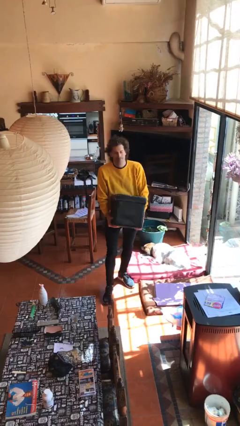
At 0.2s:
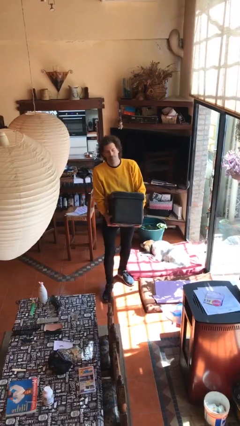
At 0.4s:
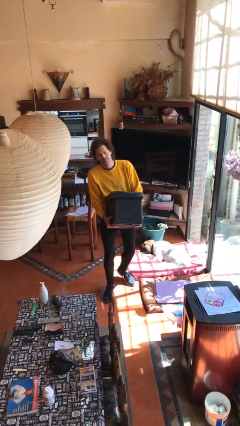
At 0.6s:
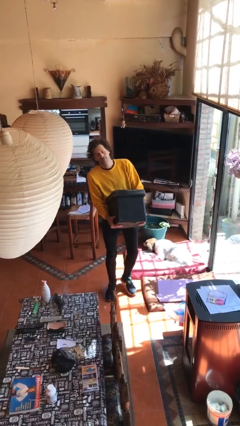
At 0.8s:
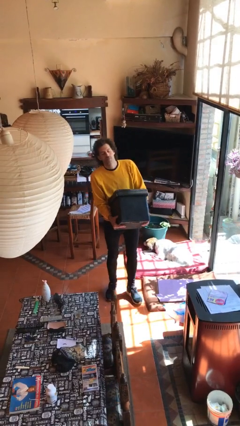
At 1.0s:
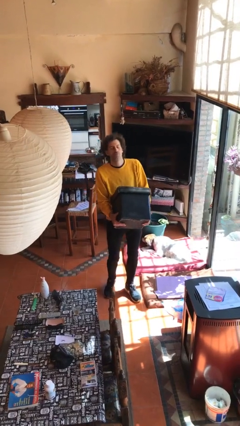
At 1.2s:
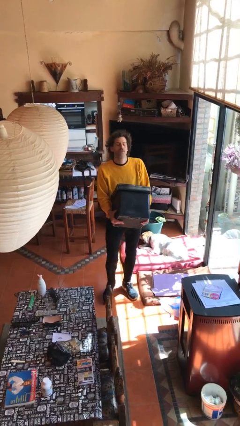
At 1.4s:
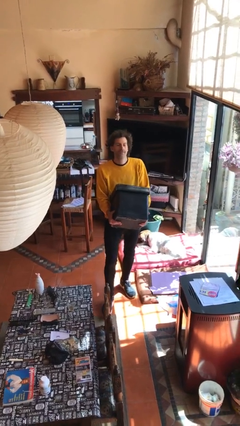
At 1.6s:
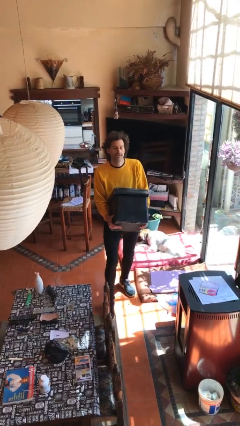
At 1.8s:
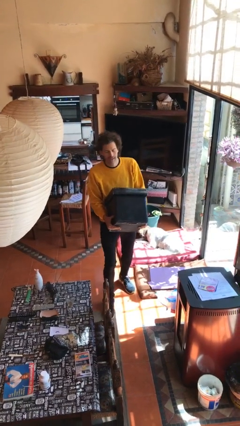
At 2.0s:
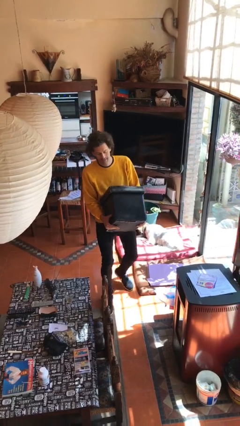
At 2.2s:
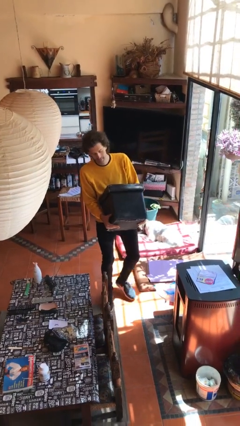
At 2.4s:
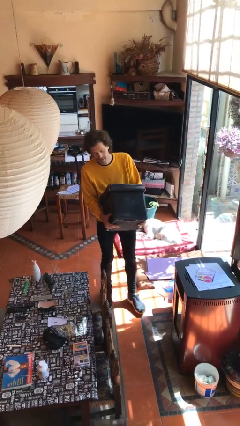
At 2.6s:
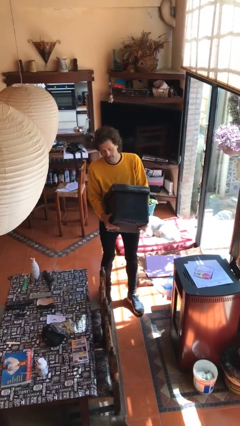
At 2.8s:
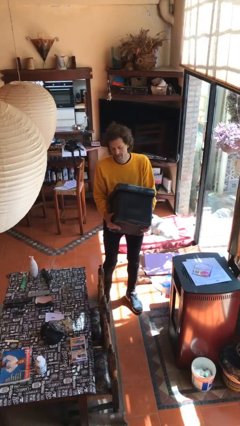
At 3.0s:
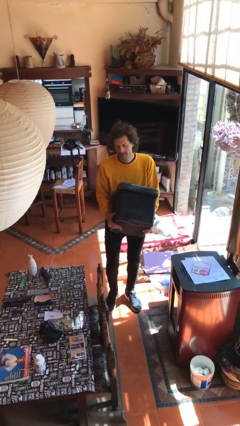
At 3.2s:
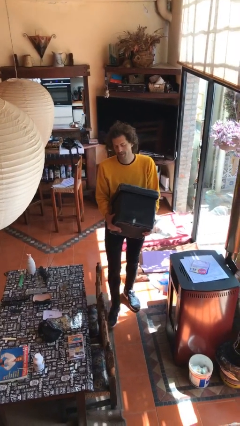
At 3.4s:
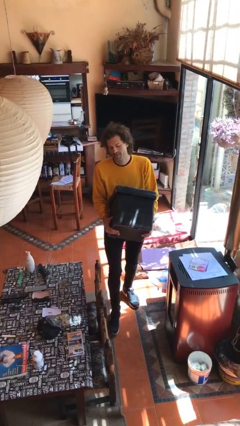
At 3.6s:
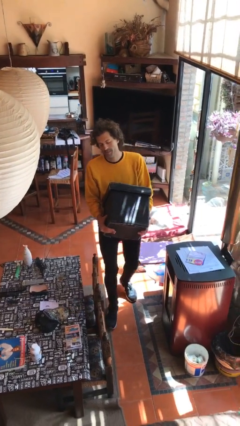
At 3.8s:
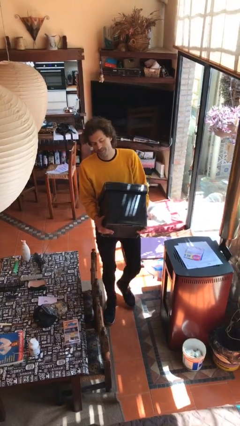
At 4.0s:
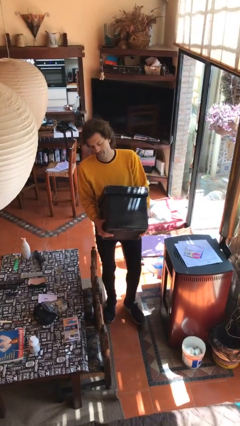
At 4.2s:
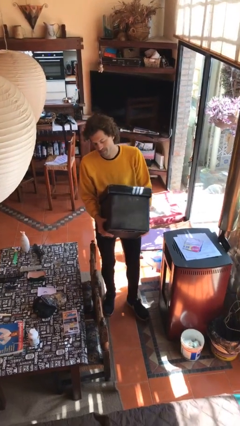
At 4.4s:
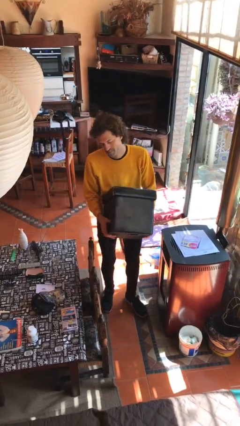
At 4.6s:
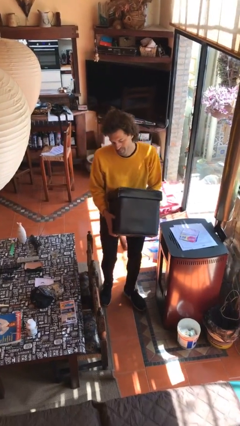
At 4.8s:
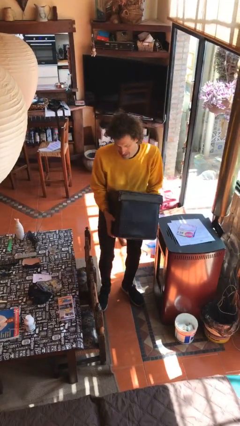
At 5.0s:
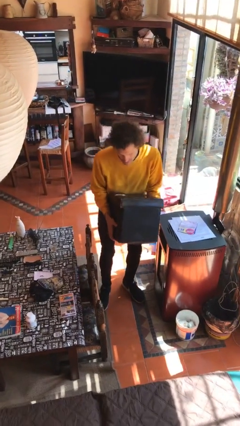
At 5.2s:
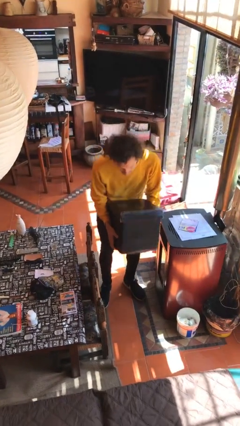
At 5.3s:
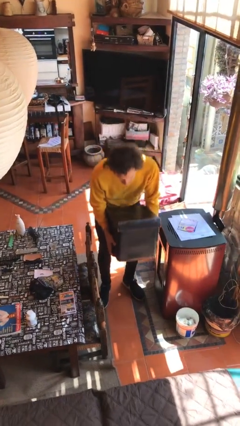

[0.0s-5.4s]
person carries heavy object

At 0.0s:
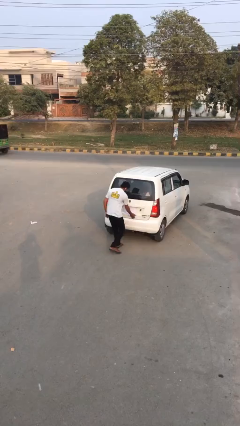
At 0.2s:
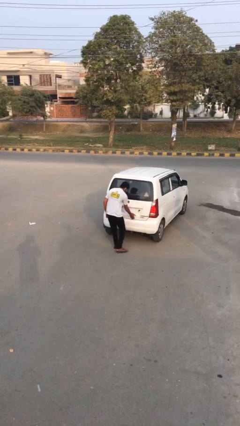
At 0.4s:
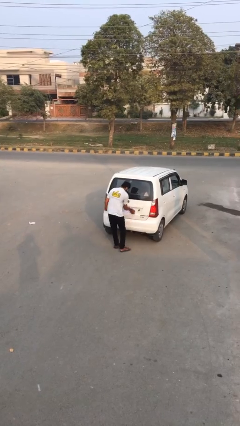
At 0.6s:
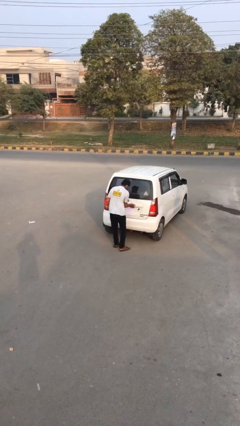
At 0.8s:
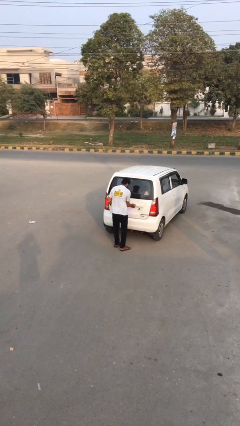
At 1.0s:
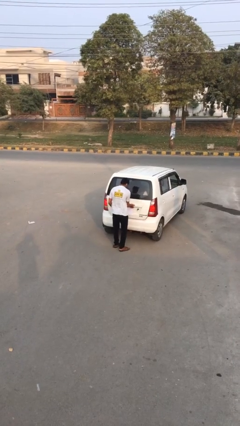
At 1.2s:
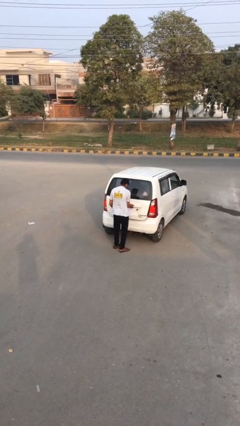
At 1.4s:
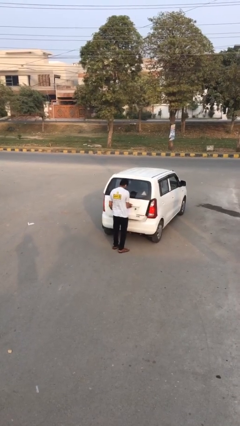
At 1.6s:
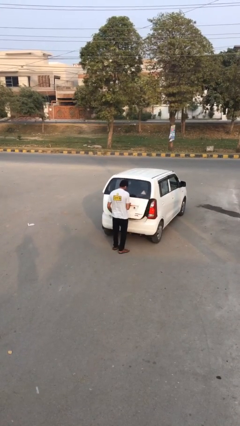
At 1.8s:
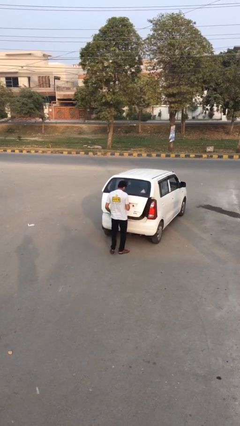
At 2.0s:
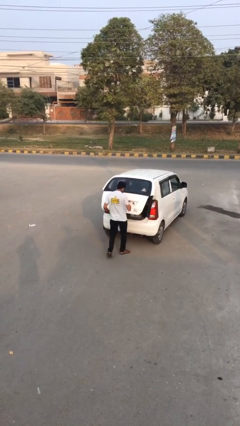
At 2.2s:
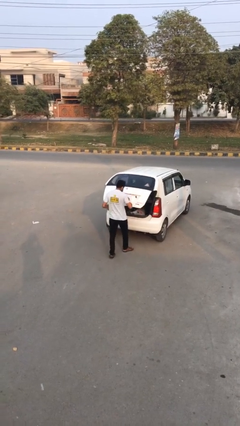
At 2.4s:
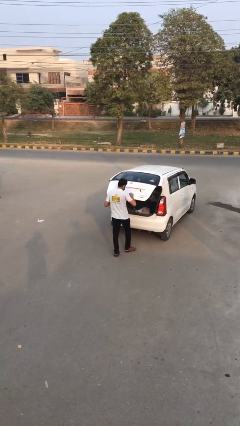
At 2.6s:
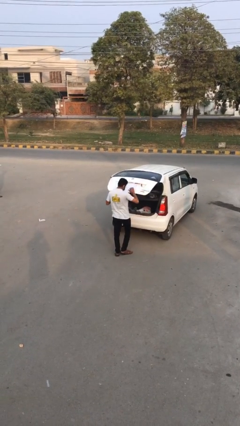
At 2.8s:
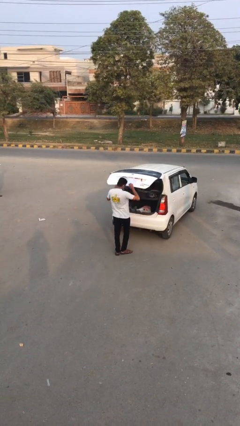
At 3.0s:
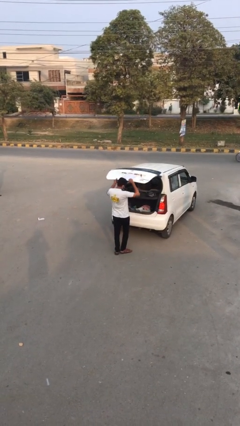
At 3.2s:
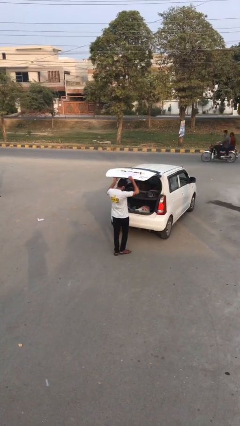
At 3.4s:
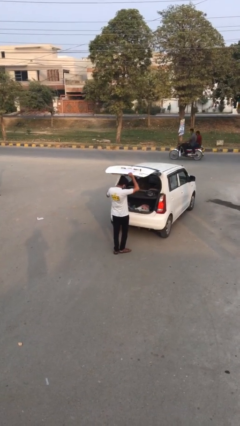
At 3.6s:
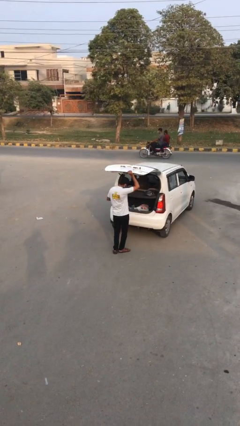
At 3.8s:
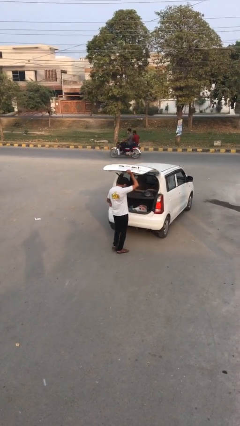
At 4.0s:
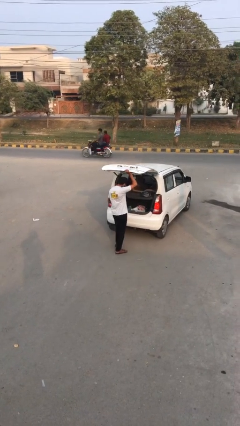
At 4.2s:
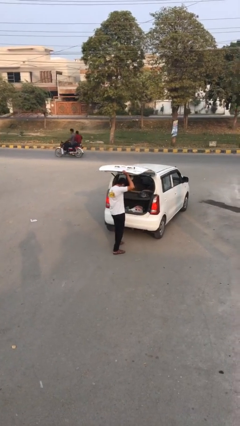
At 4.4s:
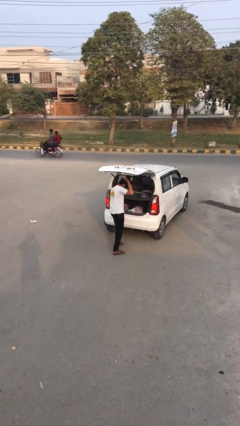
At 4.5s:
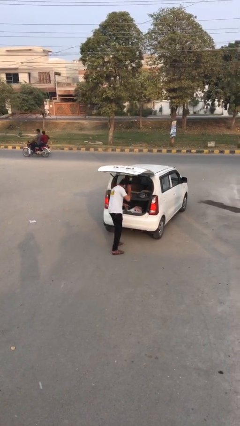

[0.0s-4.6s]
person opens car trunk

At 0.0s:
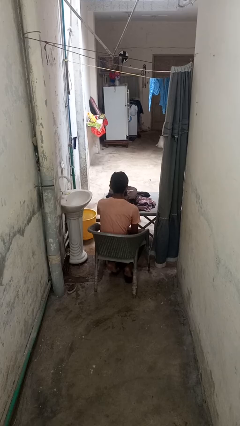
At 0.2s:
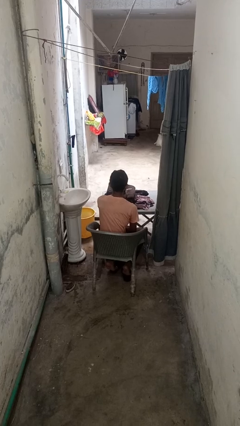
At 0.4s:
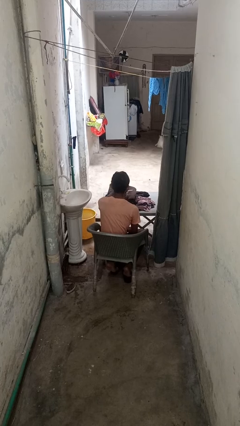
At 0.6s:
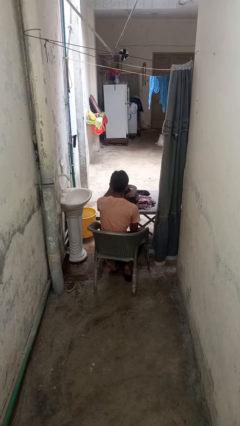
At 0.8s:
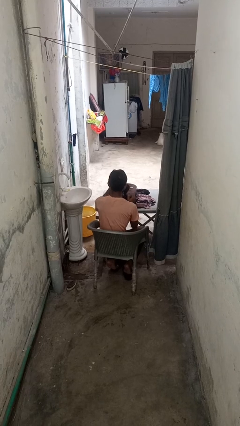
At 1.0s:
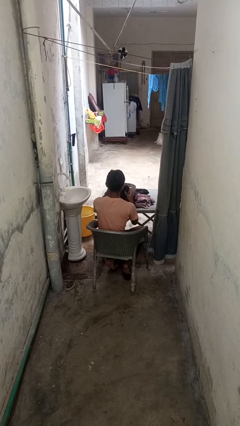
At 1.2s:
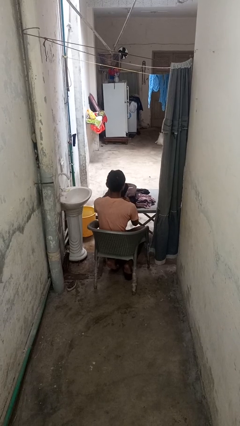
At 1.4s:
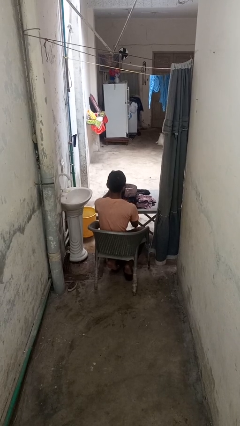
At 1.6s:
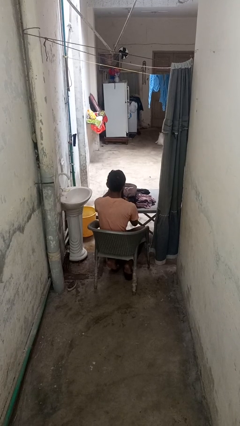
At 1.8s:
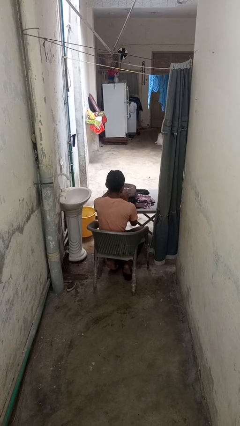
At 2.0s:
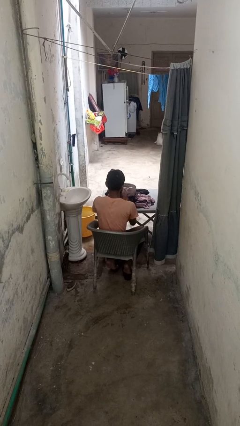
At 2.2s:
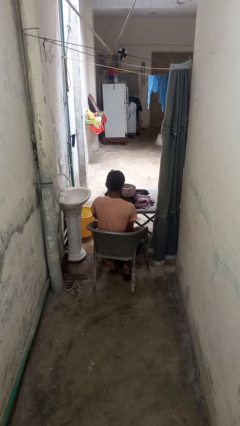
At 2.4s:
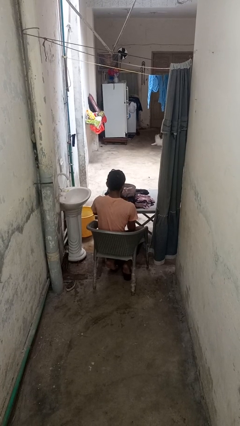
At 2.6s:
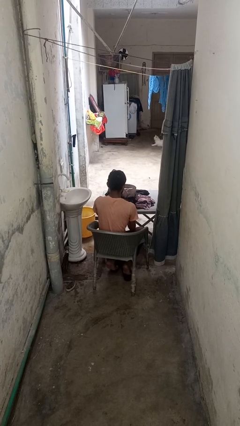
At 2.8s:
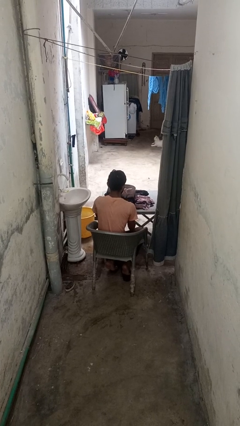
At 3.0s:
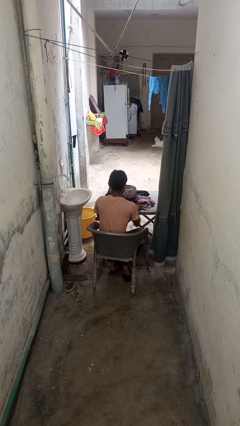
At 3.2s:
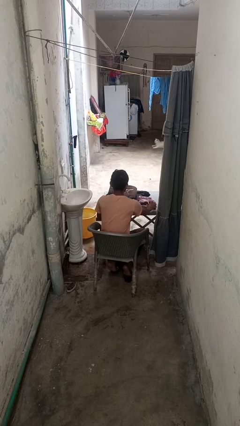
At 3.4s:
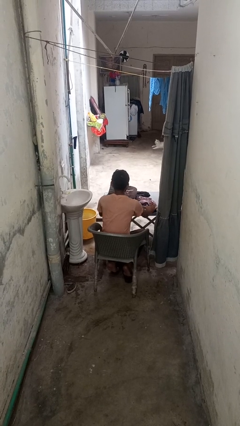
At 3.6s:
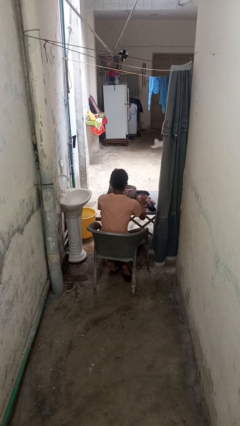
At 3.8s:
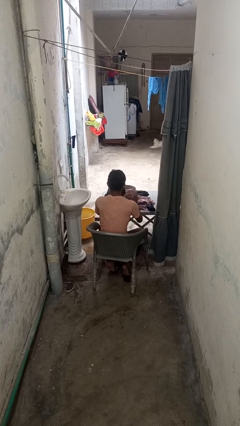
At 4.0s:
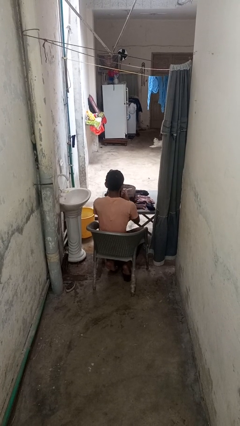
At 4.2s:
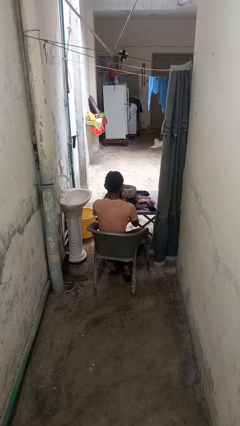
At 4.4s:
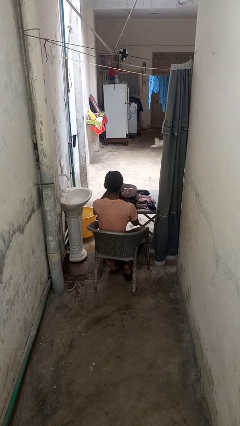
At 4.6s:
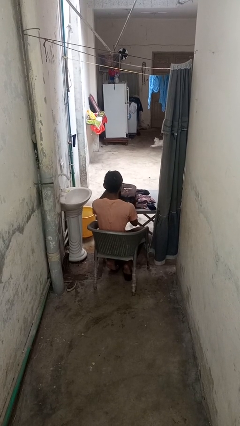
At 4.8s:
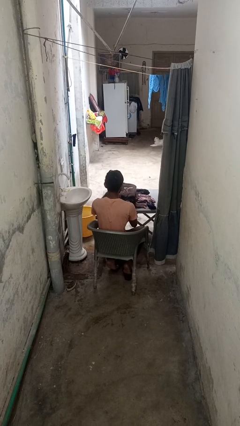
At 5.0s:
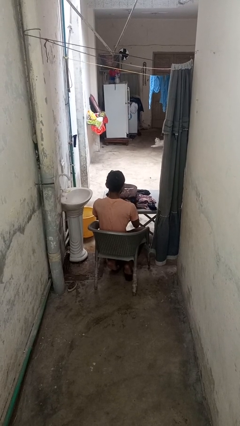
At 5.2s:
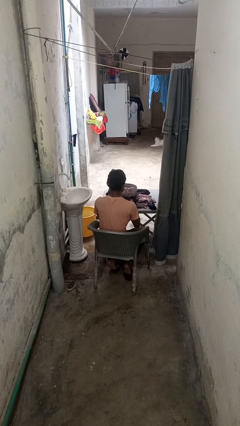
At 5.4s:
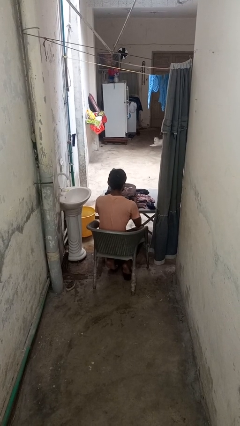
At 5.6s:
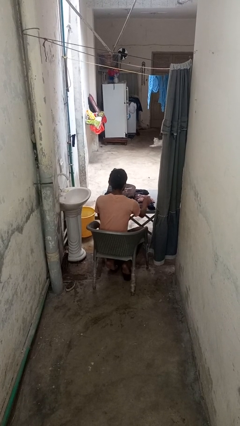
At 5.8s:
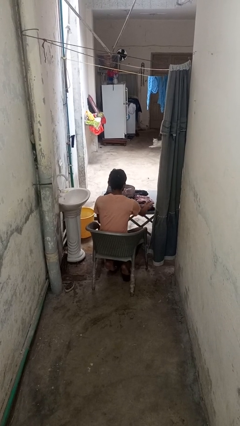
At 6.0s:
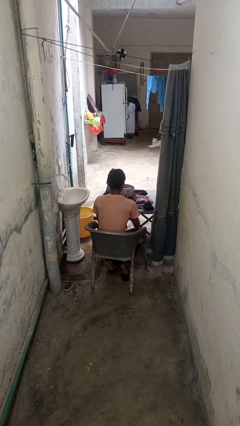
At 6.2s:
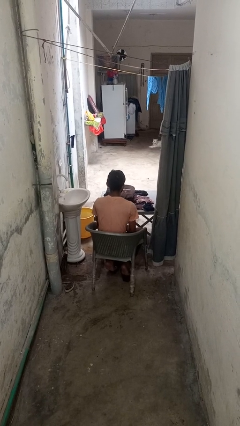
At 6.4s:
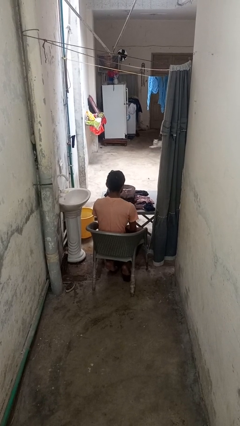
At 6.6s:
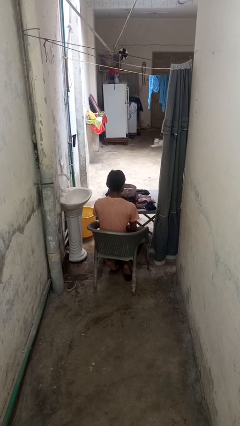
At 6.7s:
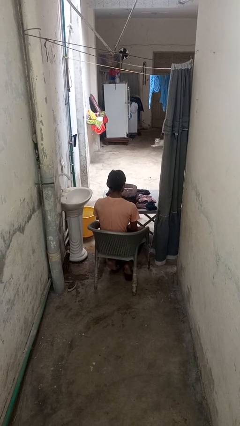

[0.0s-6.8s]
person folds socks

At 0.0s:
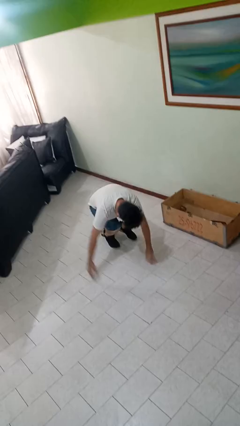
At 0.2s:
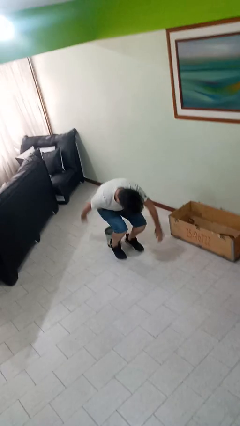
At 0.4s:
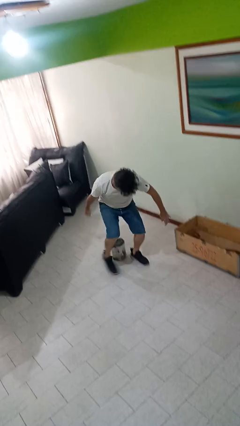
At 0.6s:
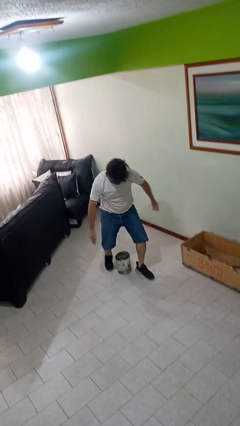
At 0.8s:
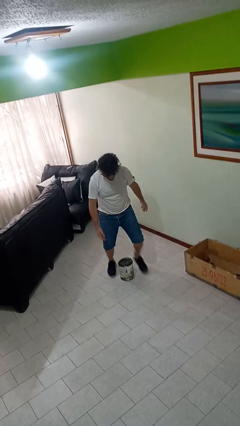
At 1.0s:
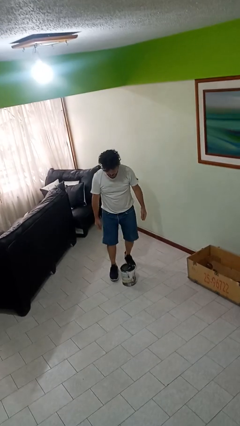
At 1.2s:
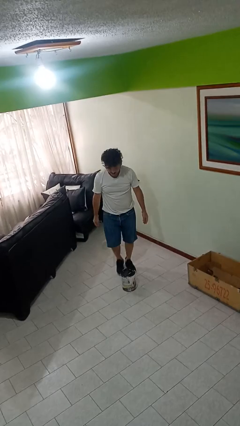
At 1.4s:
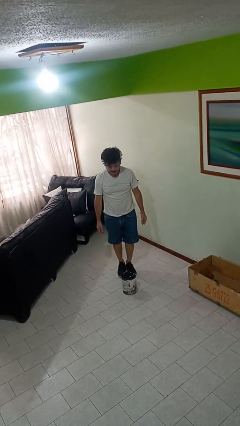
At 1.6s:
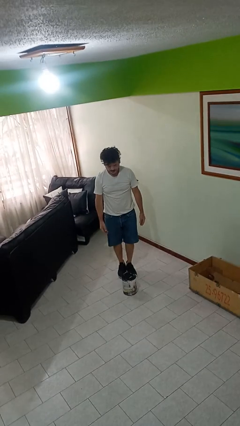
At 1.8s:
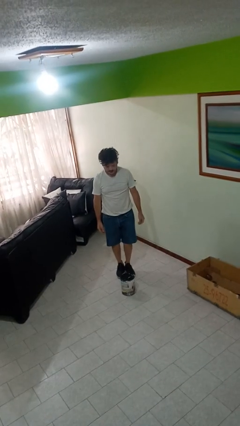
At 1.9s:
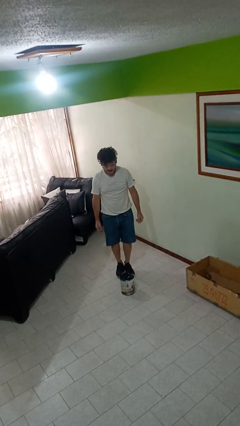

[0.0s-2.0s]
person stands up from floor
